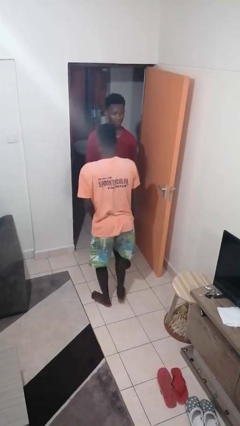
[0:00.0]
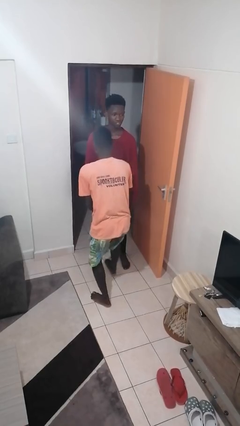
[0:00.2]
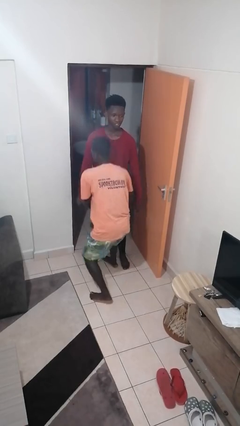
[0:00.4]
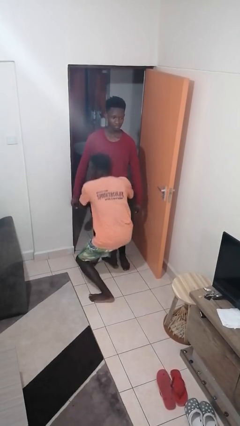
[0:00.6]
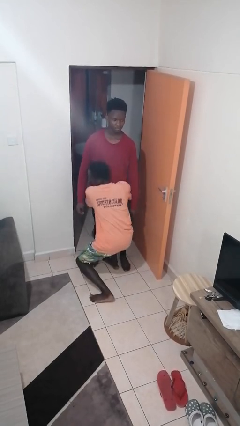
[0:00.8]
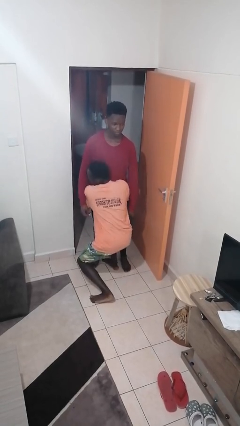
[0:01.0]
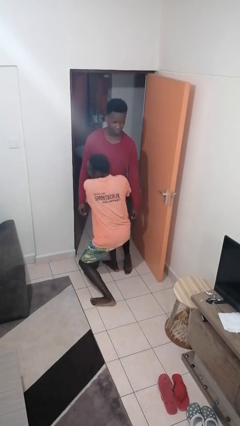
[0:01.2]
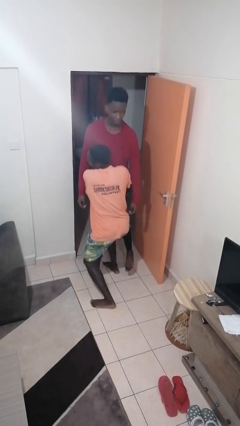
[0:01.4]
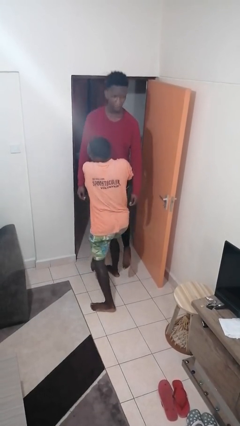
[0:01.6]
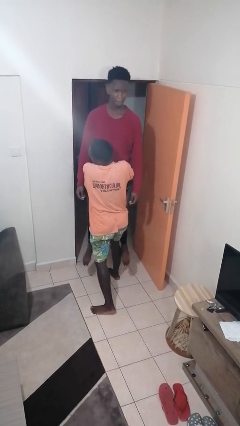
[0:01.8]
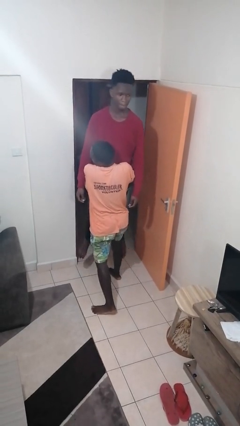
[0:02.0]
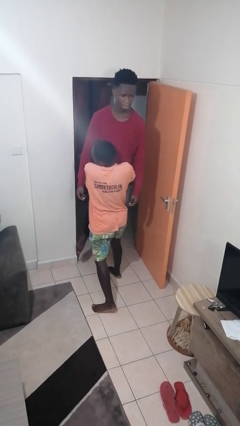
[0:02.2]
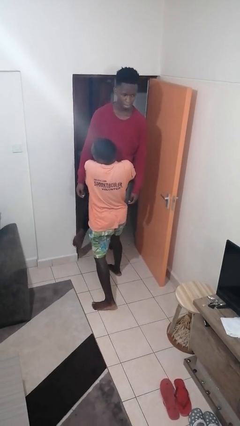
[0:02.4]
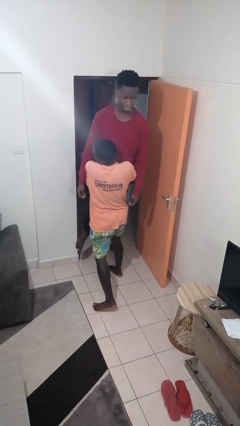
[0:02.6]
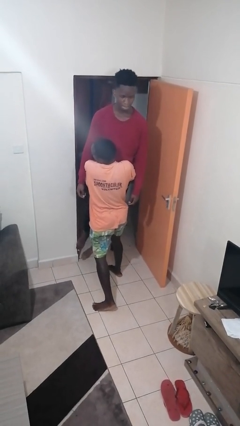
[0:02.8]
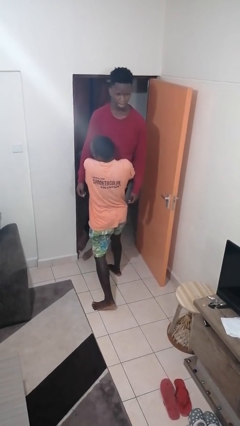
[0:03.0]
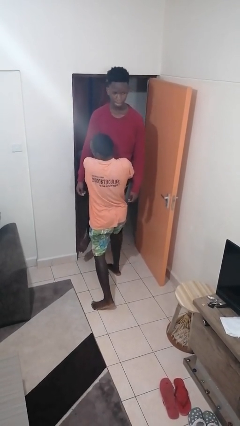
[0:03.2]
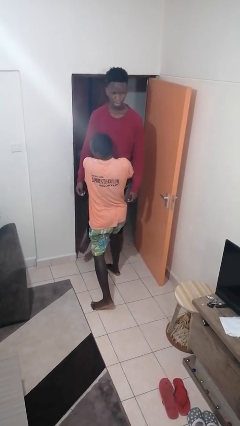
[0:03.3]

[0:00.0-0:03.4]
person picks up person

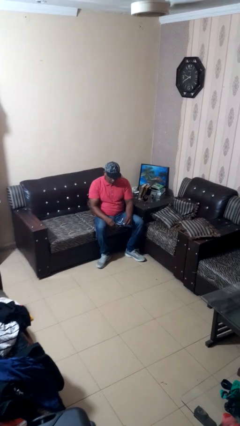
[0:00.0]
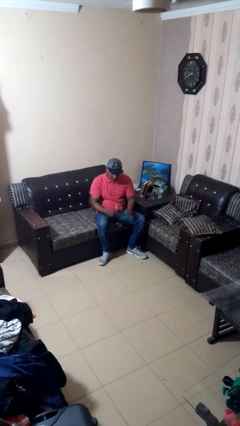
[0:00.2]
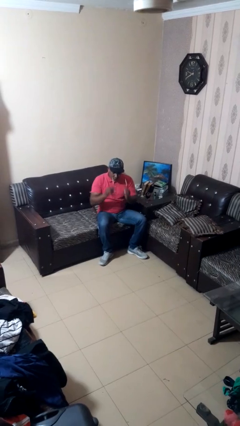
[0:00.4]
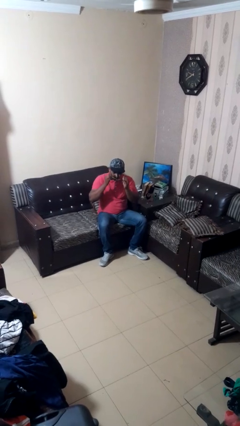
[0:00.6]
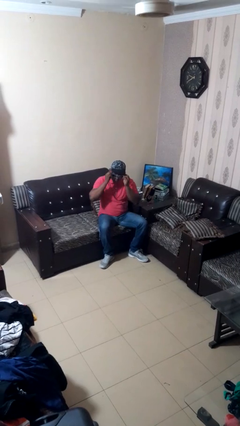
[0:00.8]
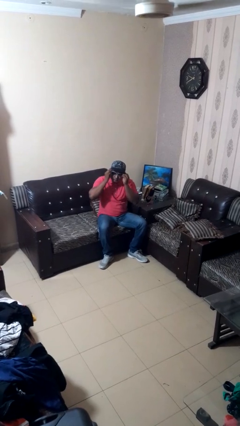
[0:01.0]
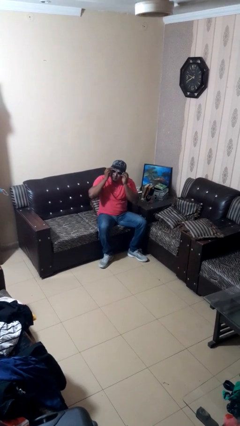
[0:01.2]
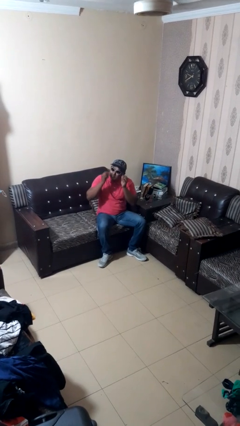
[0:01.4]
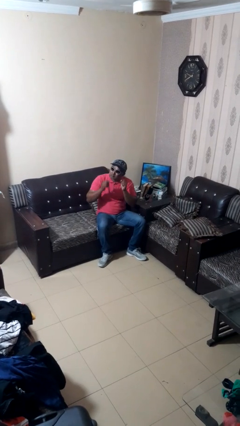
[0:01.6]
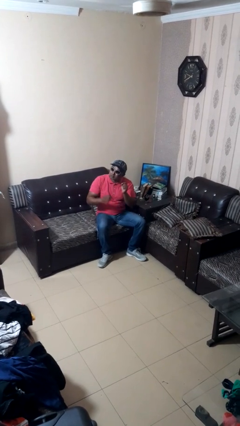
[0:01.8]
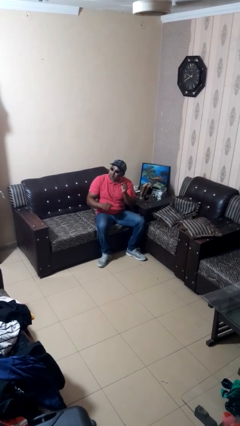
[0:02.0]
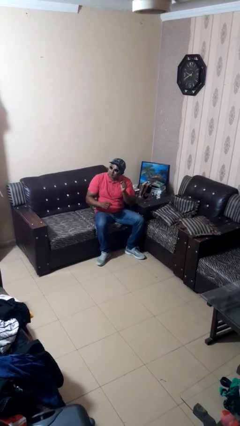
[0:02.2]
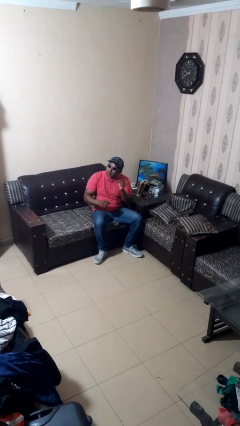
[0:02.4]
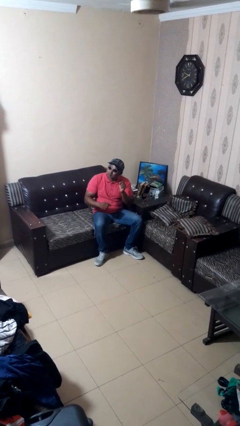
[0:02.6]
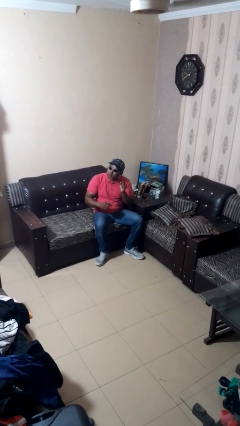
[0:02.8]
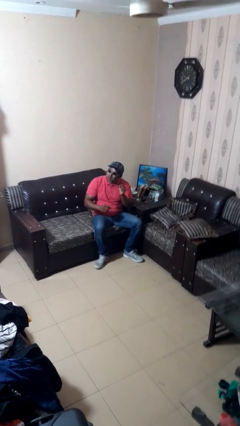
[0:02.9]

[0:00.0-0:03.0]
person puts on sunglasses

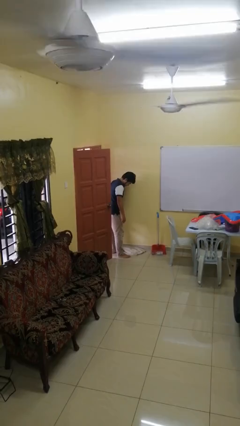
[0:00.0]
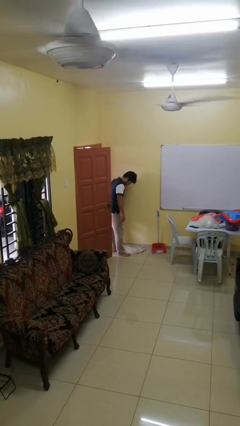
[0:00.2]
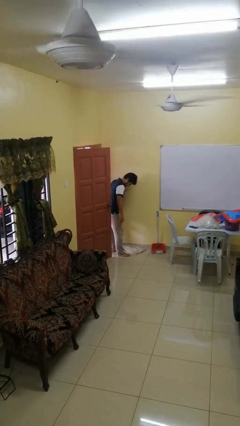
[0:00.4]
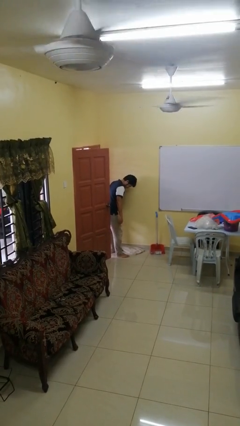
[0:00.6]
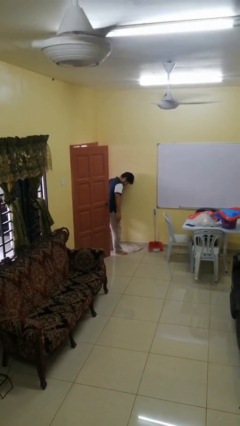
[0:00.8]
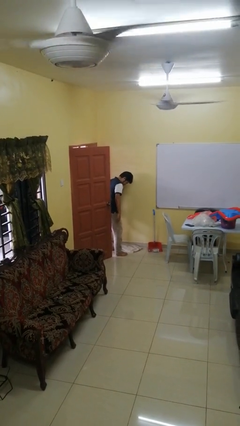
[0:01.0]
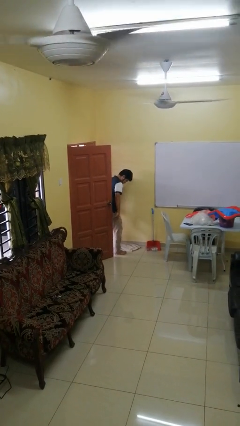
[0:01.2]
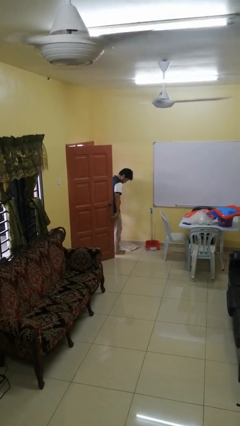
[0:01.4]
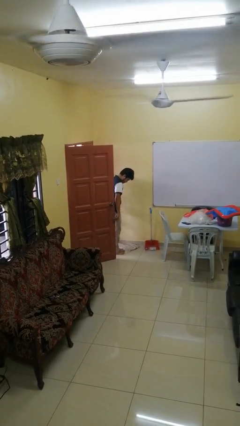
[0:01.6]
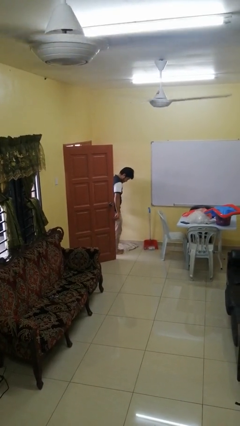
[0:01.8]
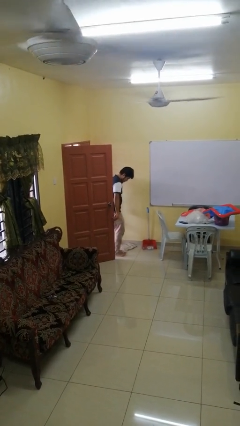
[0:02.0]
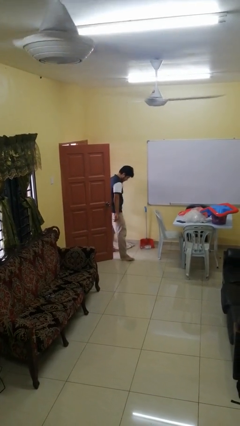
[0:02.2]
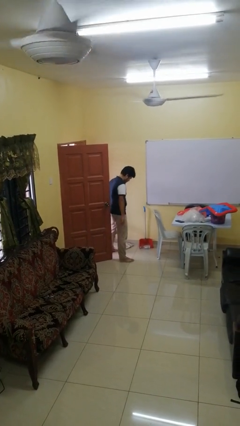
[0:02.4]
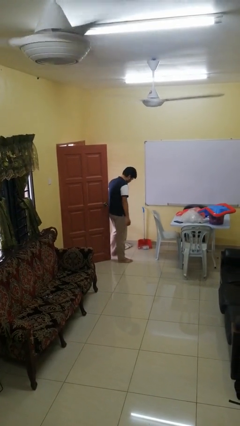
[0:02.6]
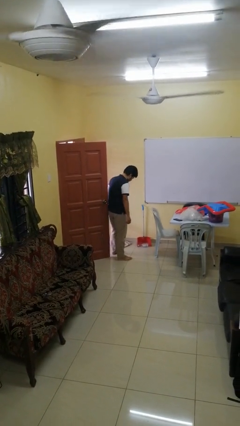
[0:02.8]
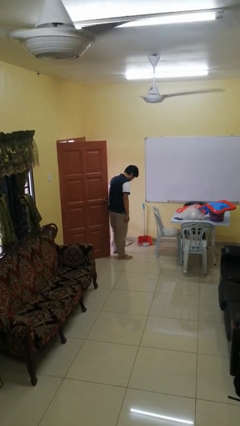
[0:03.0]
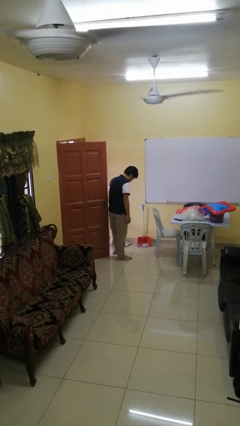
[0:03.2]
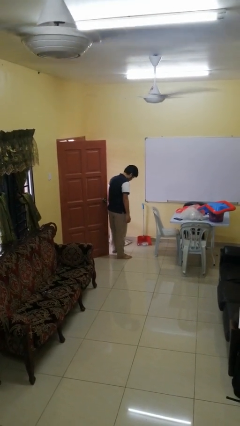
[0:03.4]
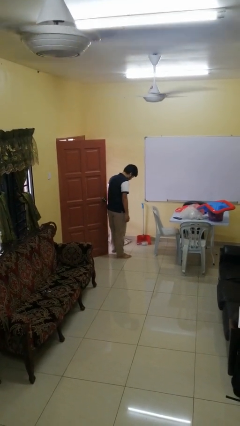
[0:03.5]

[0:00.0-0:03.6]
person opens facility door

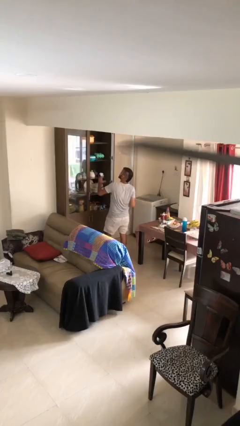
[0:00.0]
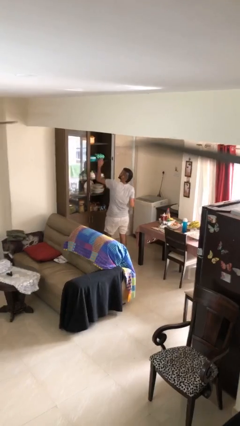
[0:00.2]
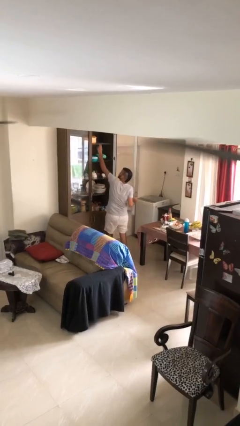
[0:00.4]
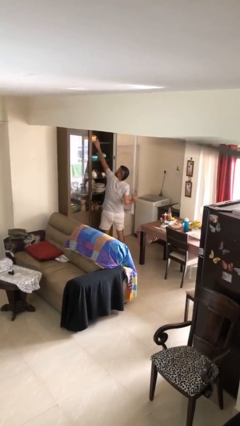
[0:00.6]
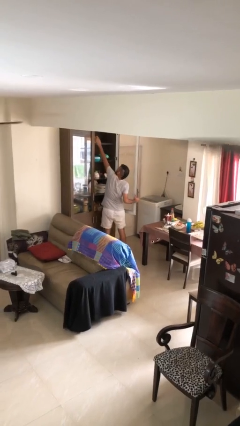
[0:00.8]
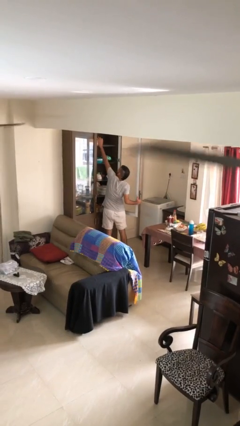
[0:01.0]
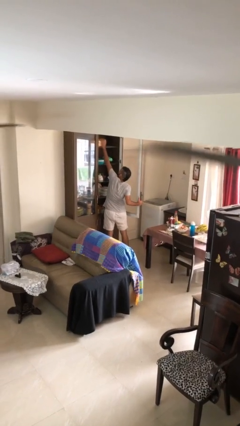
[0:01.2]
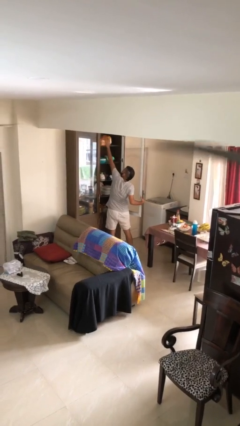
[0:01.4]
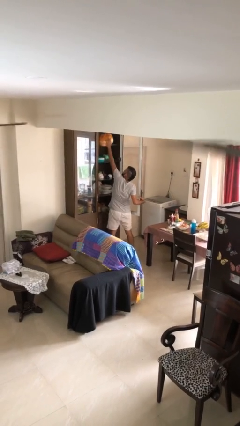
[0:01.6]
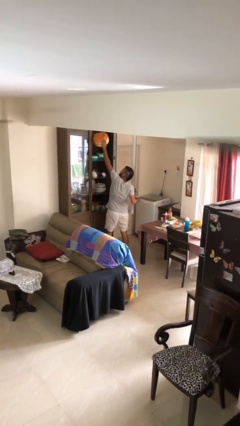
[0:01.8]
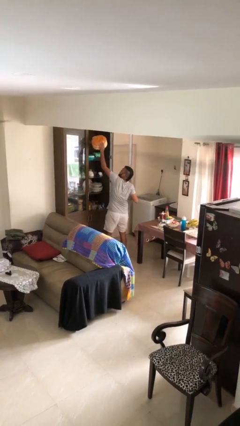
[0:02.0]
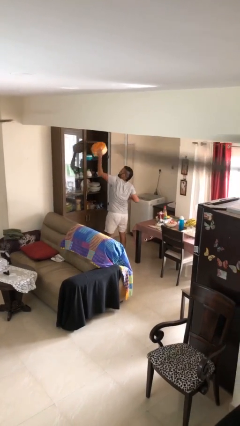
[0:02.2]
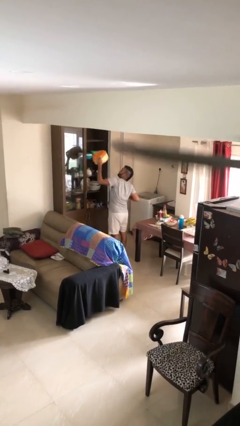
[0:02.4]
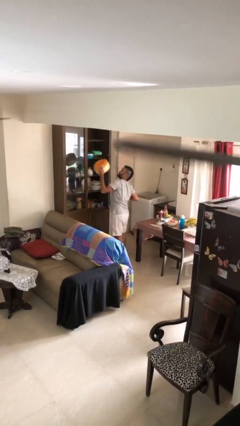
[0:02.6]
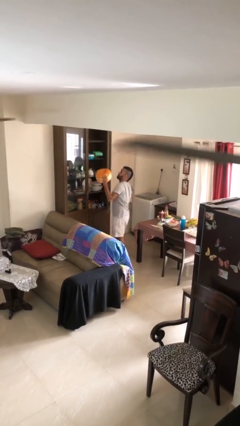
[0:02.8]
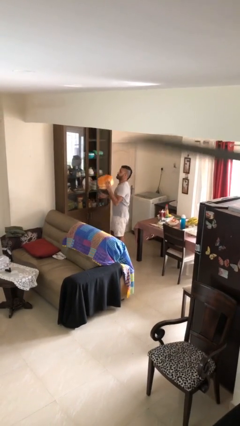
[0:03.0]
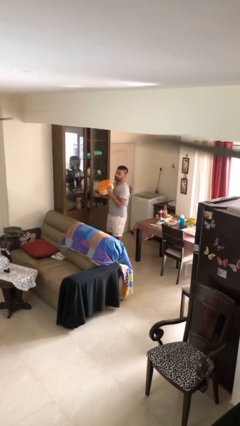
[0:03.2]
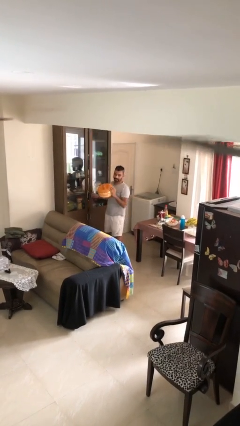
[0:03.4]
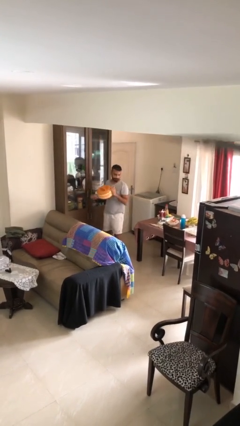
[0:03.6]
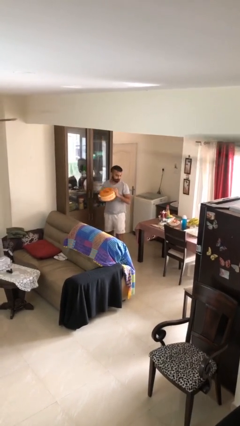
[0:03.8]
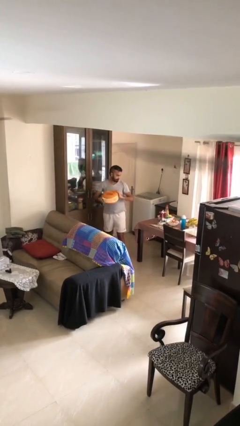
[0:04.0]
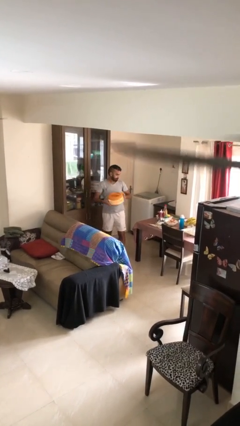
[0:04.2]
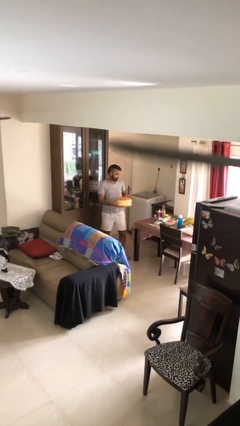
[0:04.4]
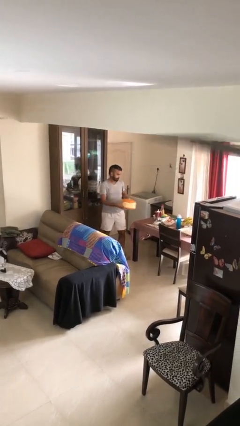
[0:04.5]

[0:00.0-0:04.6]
person picks up object from shelf

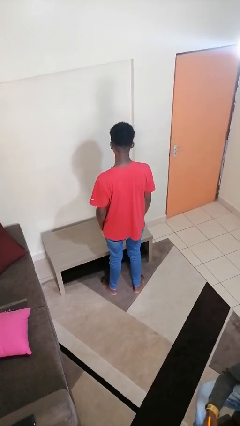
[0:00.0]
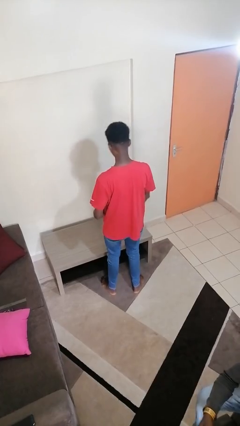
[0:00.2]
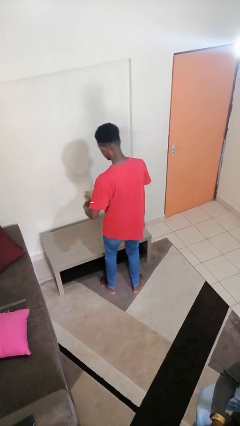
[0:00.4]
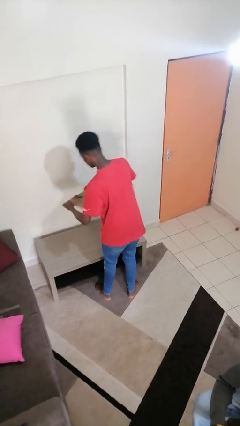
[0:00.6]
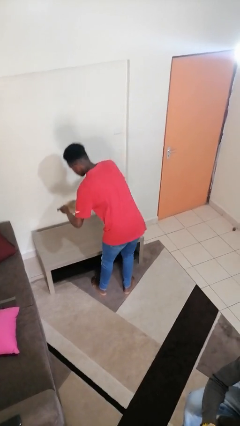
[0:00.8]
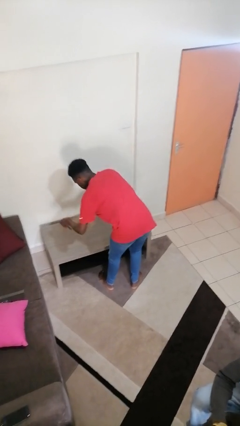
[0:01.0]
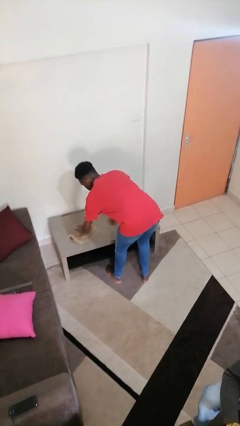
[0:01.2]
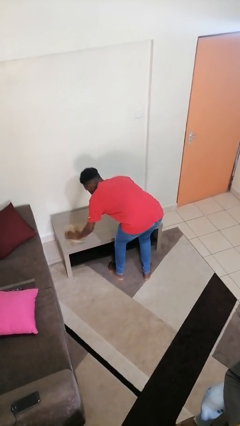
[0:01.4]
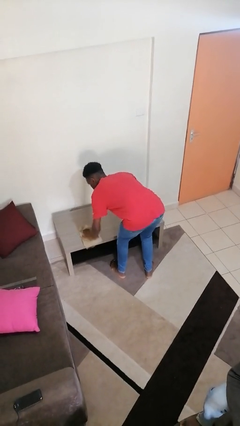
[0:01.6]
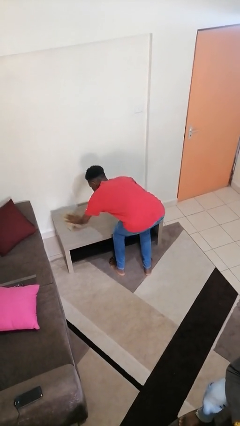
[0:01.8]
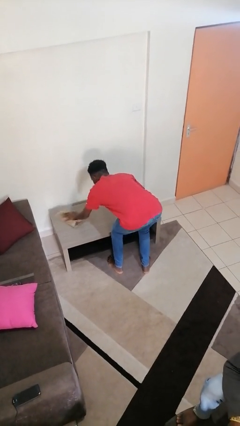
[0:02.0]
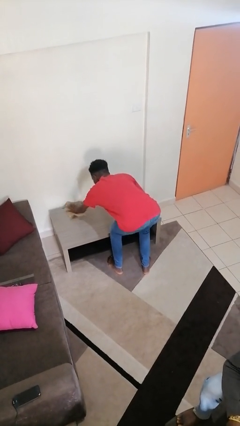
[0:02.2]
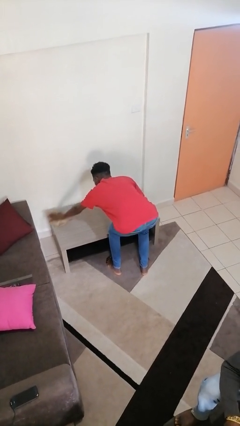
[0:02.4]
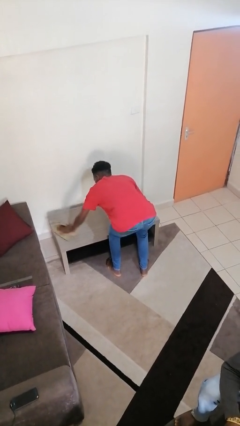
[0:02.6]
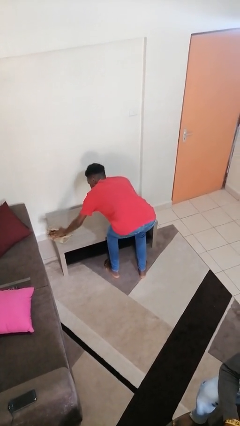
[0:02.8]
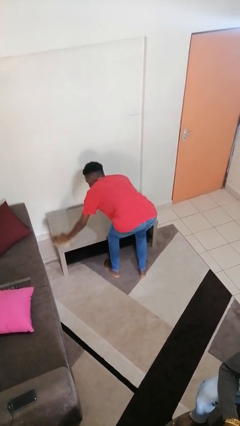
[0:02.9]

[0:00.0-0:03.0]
person cleans table with rag
